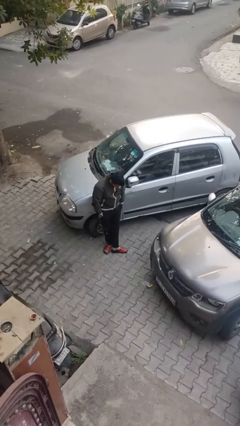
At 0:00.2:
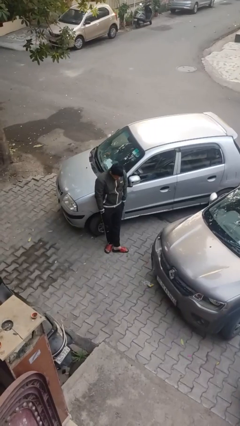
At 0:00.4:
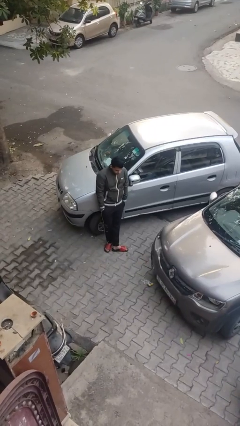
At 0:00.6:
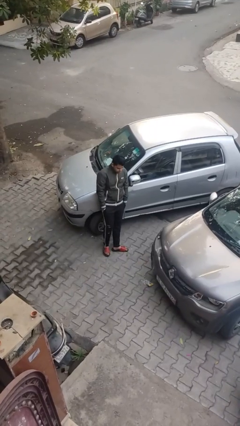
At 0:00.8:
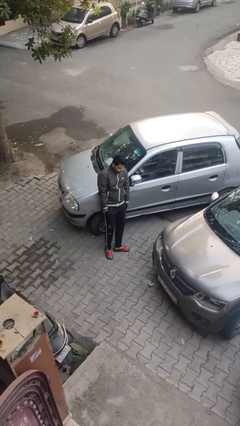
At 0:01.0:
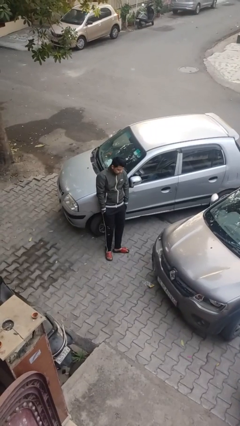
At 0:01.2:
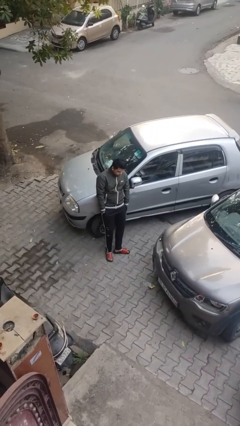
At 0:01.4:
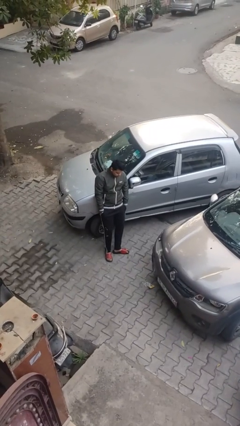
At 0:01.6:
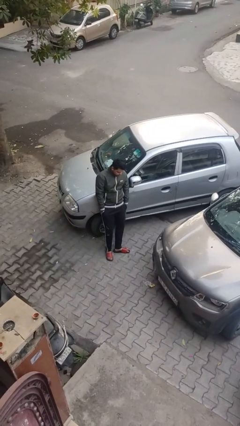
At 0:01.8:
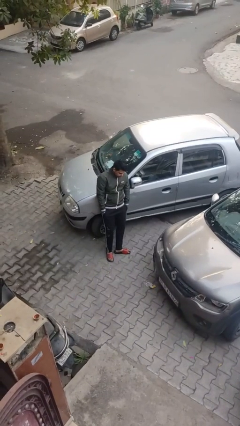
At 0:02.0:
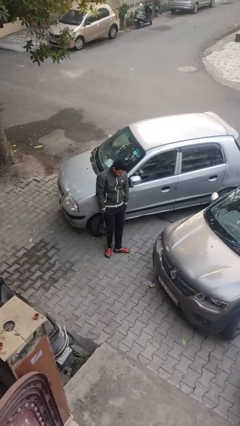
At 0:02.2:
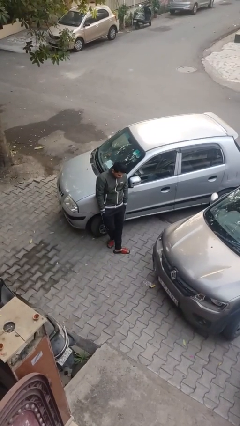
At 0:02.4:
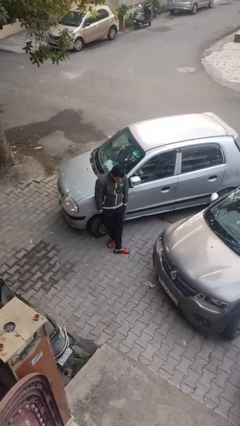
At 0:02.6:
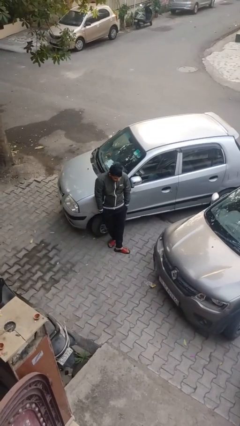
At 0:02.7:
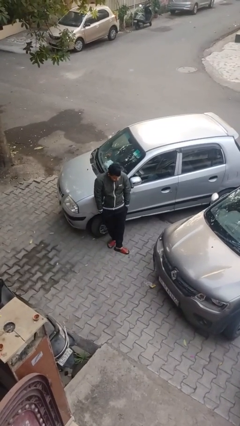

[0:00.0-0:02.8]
person leans against car

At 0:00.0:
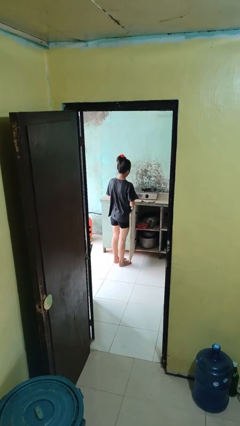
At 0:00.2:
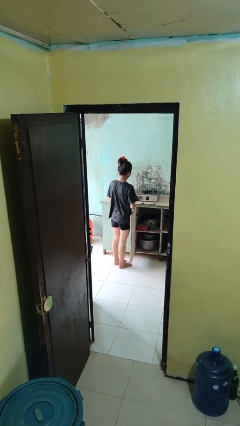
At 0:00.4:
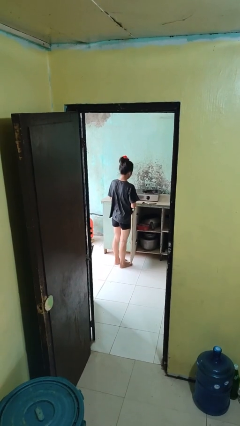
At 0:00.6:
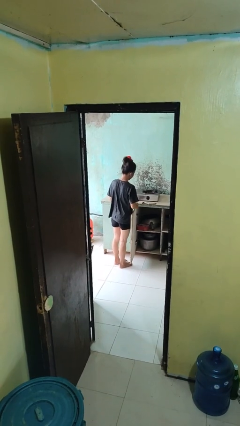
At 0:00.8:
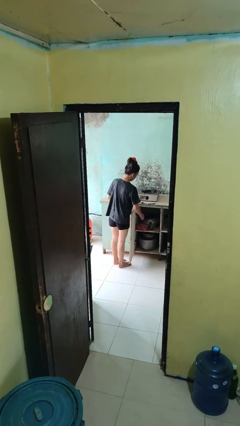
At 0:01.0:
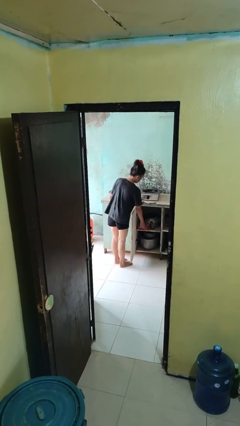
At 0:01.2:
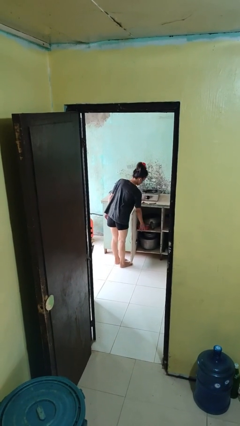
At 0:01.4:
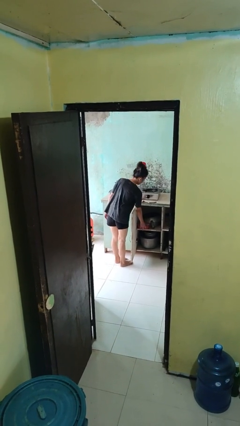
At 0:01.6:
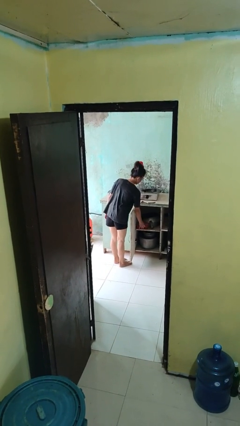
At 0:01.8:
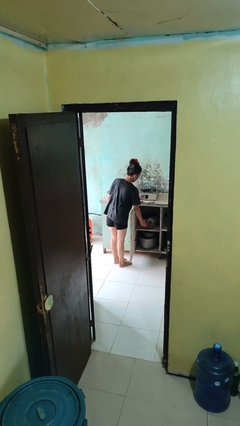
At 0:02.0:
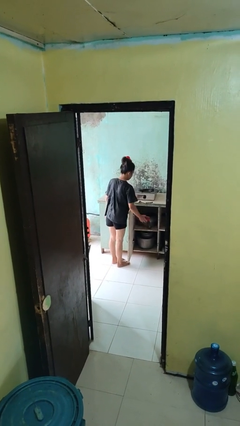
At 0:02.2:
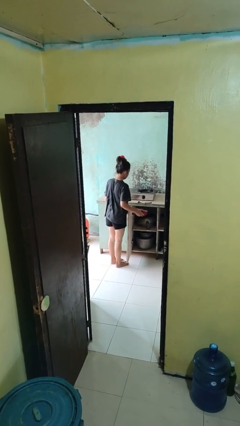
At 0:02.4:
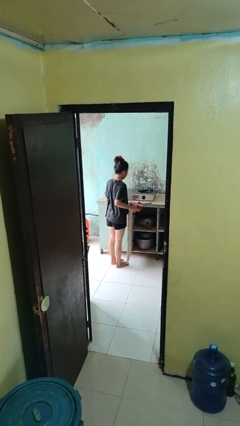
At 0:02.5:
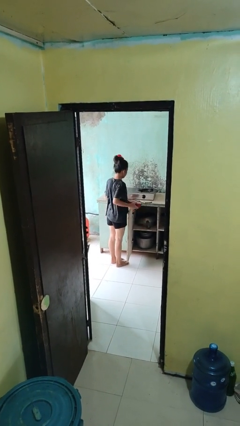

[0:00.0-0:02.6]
person takes object from cabinet

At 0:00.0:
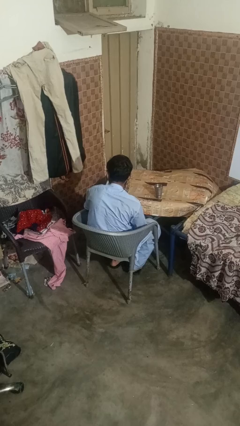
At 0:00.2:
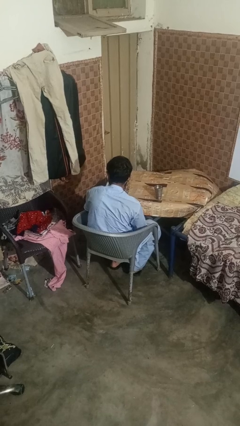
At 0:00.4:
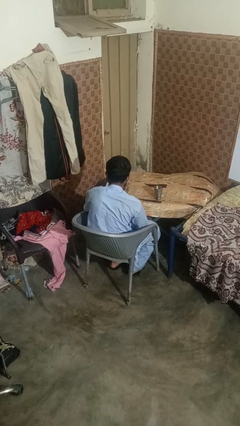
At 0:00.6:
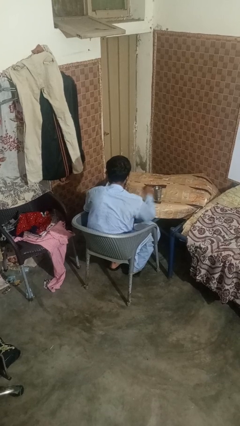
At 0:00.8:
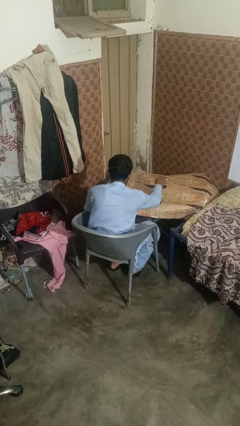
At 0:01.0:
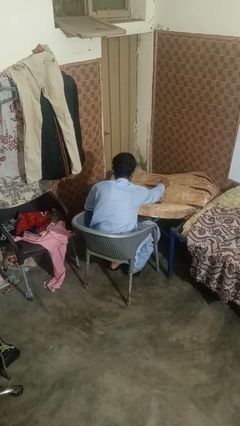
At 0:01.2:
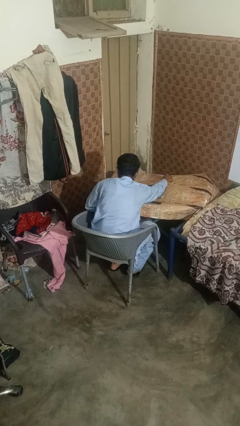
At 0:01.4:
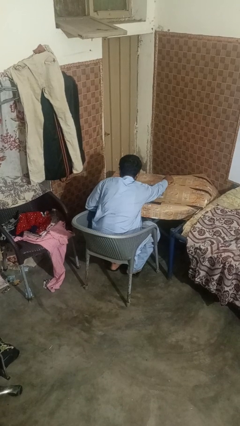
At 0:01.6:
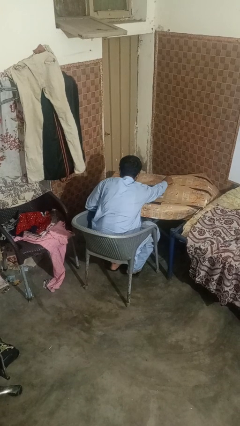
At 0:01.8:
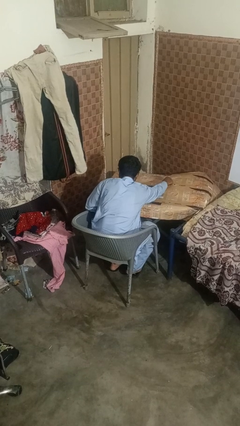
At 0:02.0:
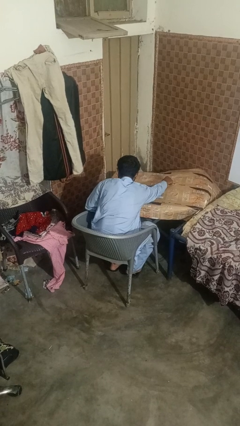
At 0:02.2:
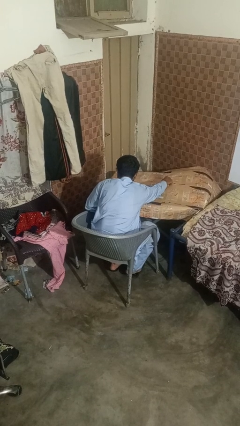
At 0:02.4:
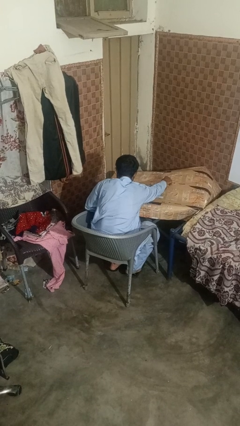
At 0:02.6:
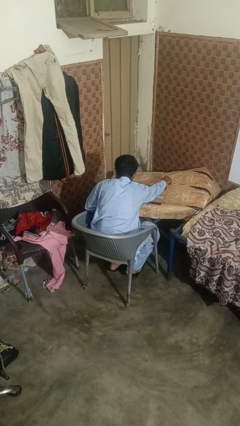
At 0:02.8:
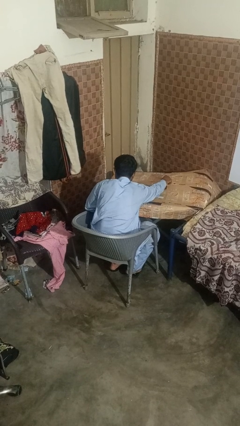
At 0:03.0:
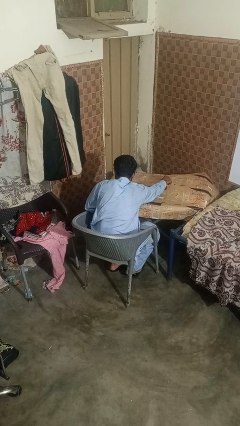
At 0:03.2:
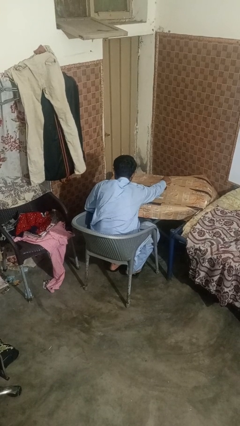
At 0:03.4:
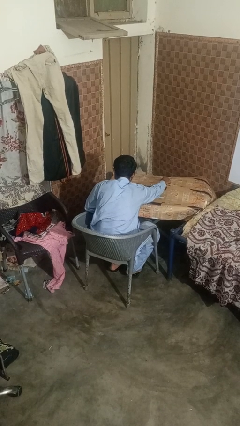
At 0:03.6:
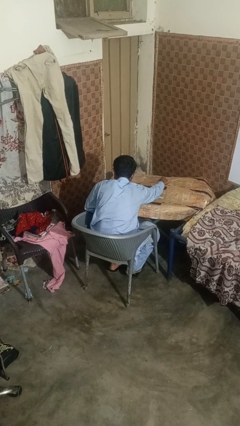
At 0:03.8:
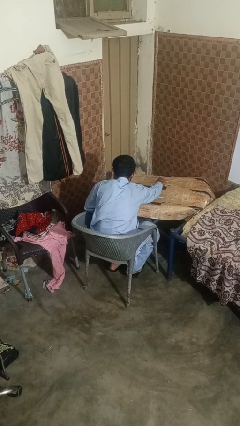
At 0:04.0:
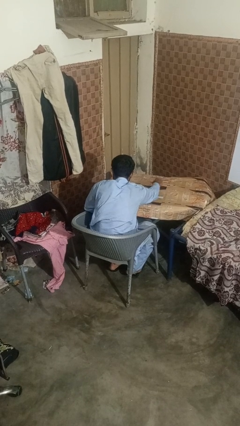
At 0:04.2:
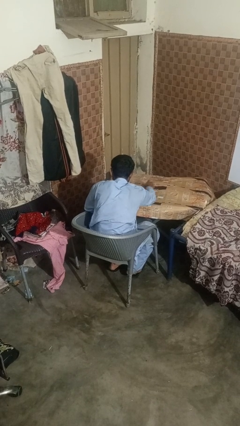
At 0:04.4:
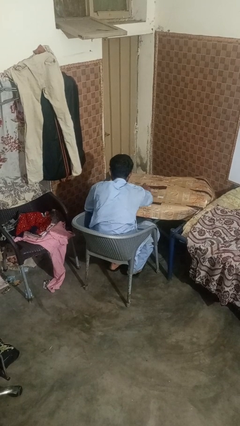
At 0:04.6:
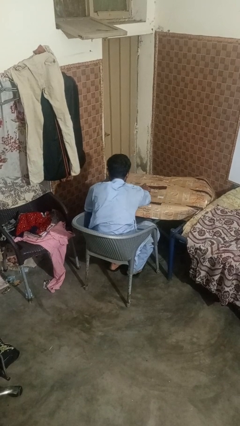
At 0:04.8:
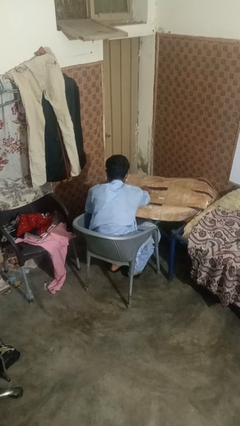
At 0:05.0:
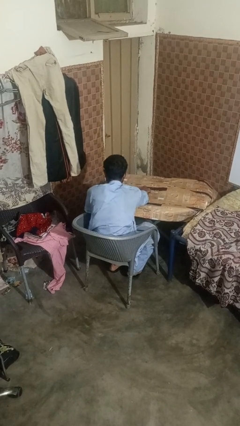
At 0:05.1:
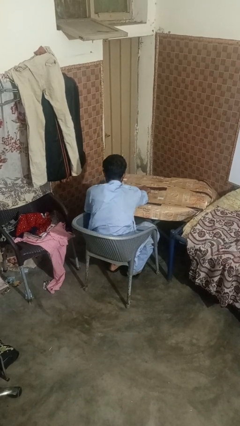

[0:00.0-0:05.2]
person knocks over glass

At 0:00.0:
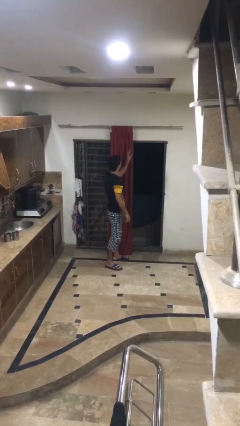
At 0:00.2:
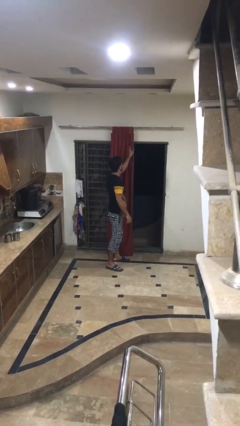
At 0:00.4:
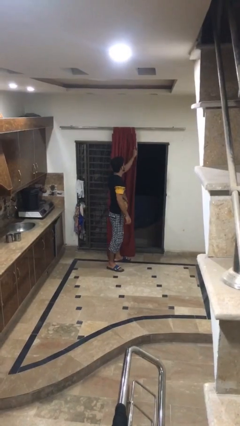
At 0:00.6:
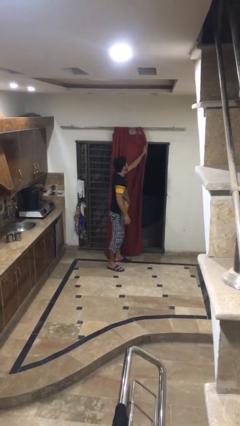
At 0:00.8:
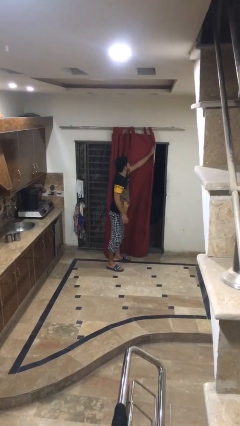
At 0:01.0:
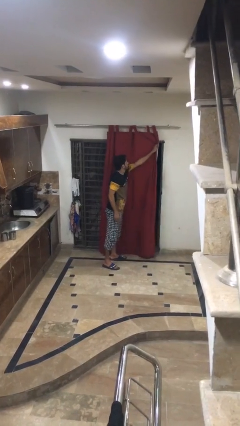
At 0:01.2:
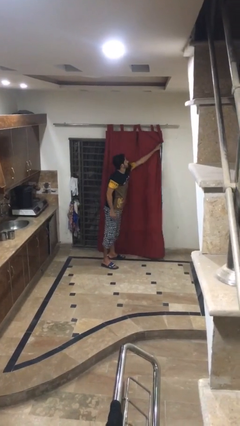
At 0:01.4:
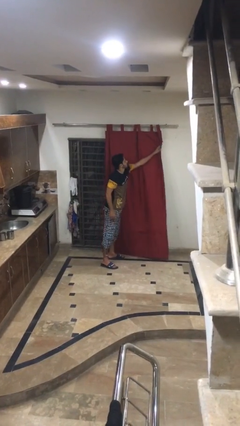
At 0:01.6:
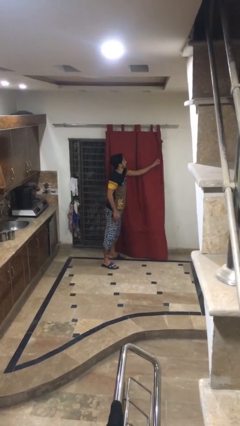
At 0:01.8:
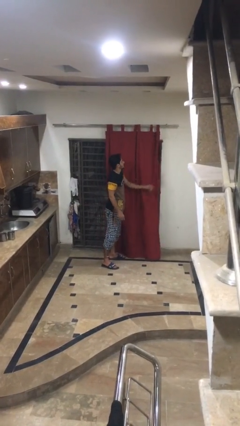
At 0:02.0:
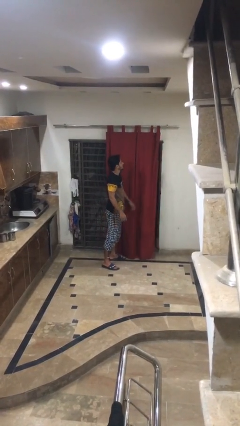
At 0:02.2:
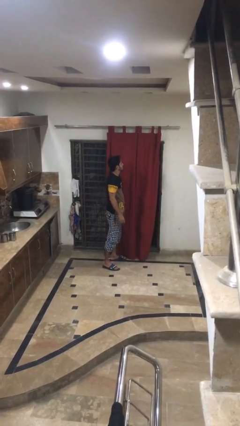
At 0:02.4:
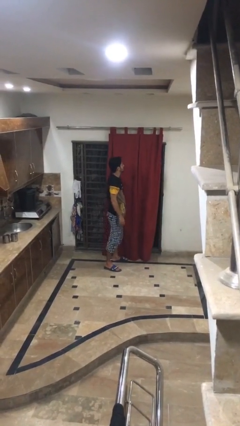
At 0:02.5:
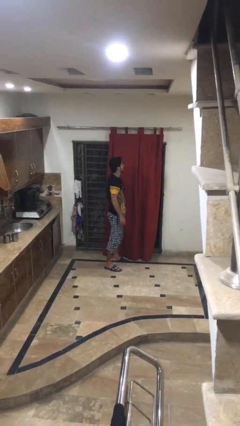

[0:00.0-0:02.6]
person closes curtains

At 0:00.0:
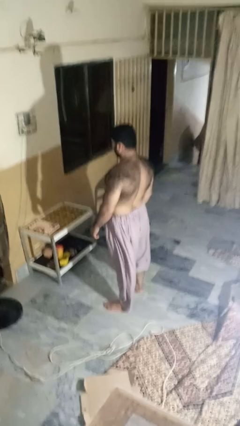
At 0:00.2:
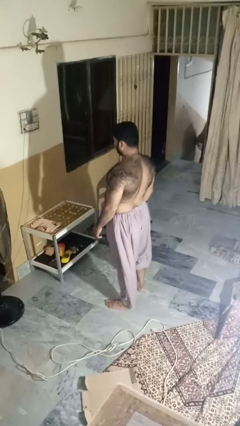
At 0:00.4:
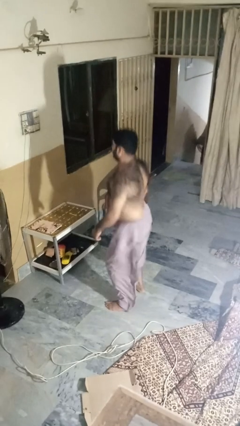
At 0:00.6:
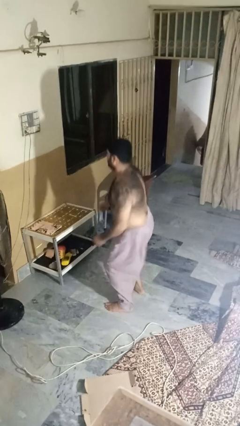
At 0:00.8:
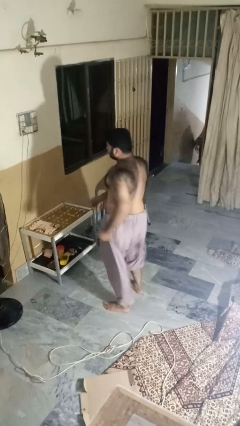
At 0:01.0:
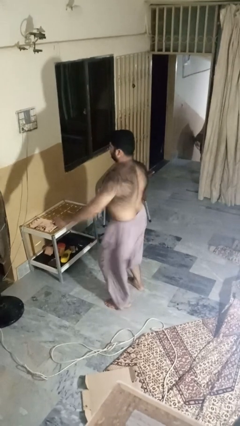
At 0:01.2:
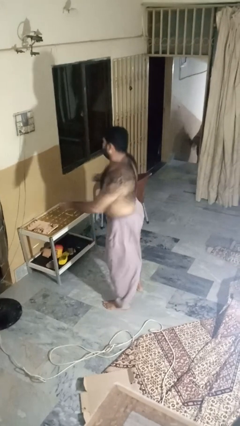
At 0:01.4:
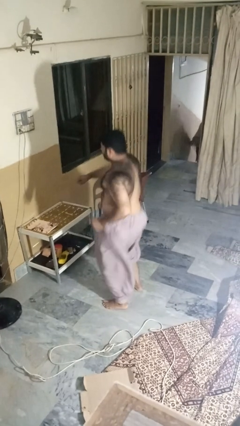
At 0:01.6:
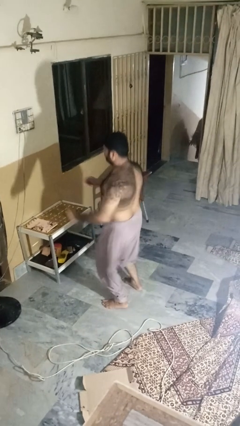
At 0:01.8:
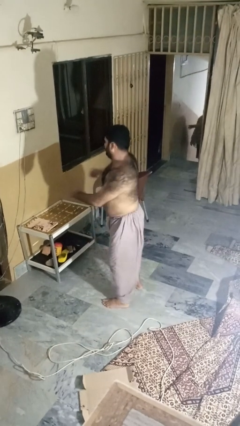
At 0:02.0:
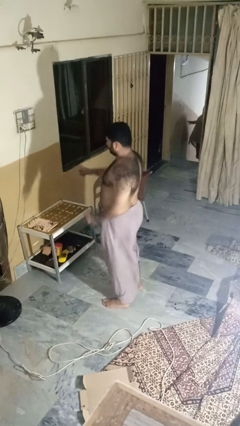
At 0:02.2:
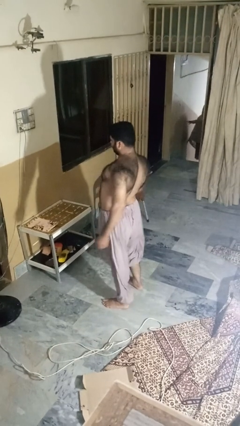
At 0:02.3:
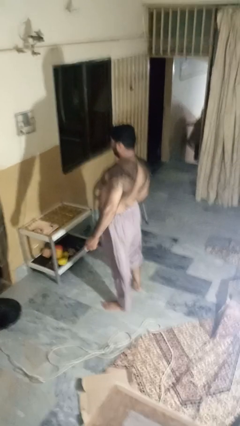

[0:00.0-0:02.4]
person dances in place

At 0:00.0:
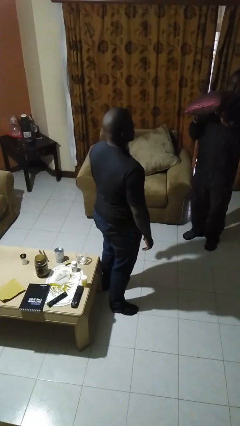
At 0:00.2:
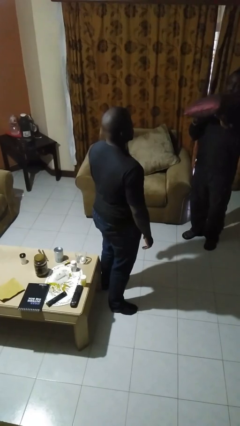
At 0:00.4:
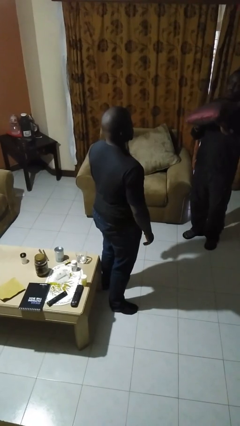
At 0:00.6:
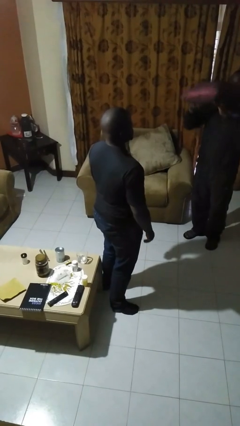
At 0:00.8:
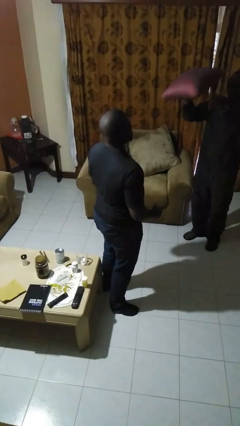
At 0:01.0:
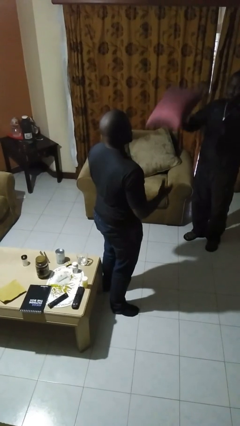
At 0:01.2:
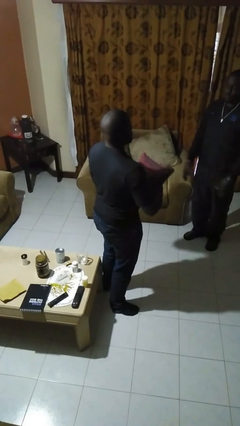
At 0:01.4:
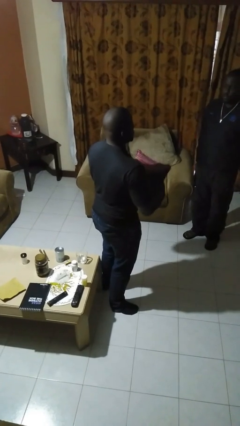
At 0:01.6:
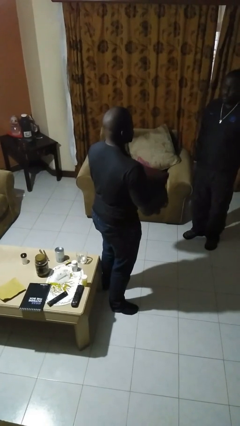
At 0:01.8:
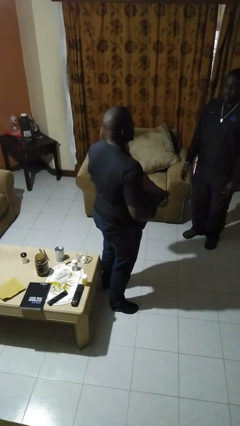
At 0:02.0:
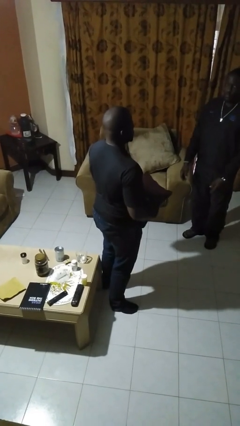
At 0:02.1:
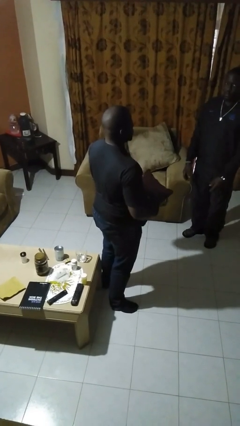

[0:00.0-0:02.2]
person catches object from person
